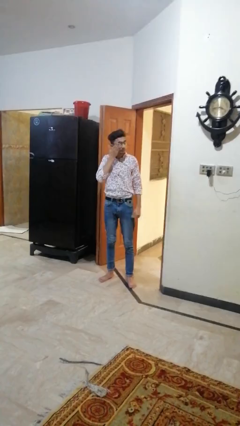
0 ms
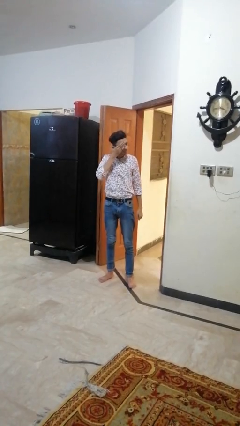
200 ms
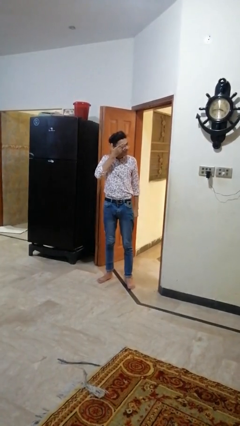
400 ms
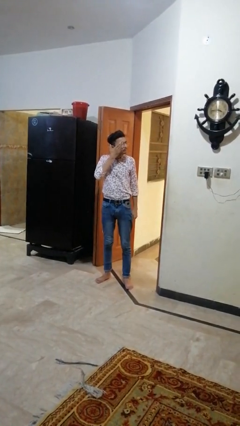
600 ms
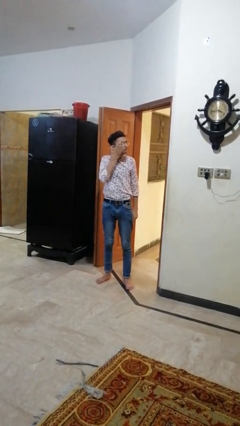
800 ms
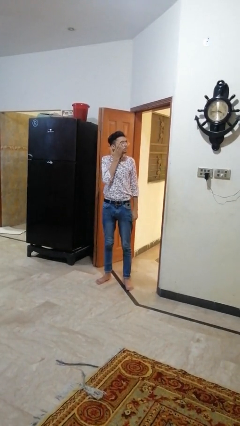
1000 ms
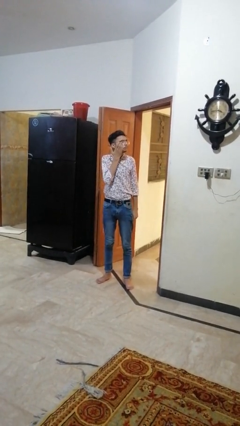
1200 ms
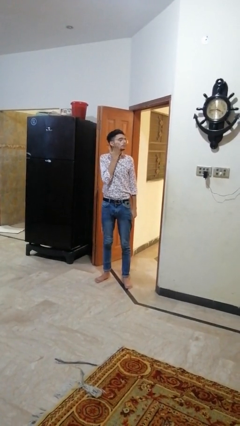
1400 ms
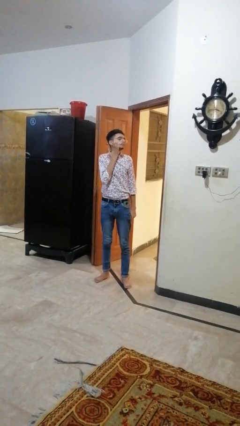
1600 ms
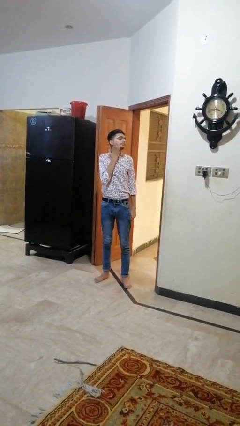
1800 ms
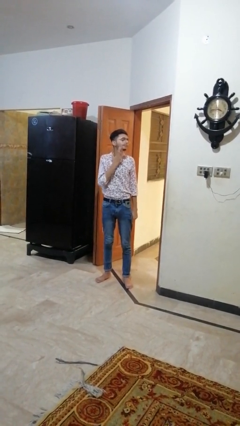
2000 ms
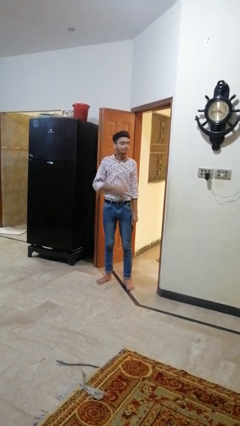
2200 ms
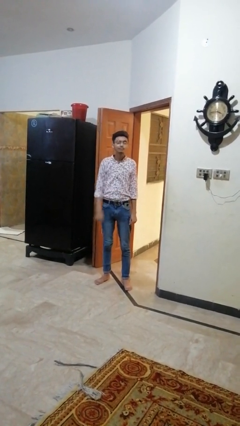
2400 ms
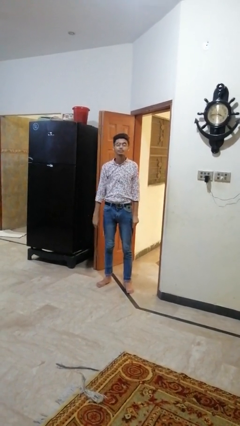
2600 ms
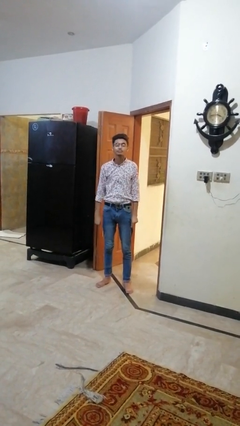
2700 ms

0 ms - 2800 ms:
person rubs eyes

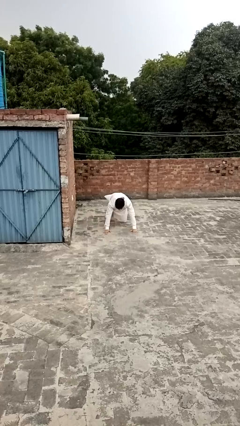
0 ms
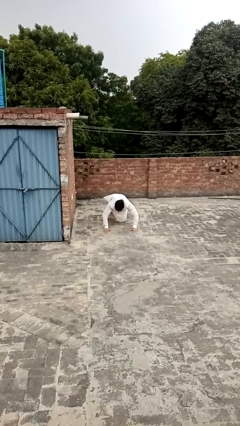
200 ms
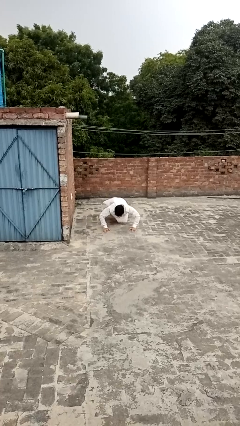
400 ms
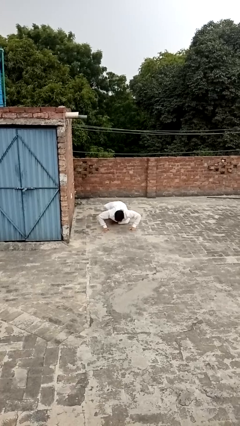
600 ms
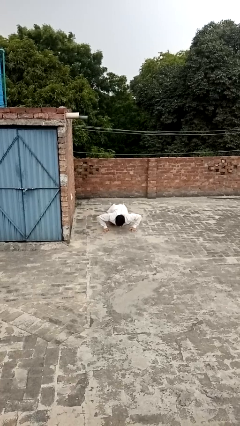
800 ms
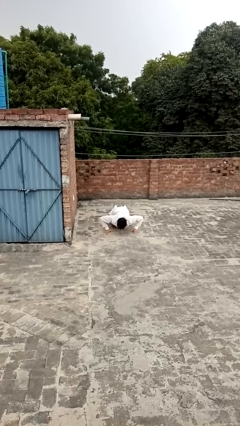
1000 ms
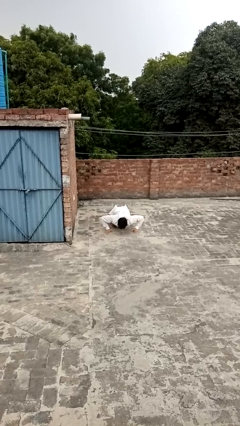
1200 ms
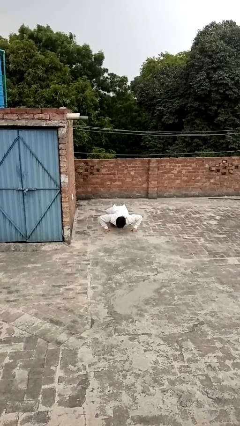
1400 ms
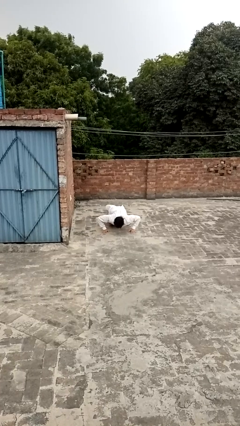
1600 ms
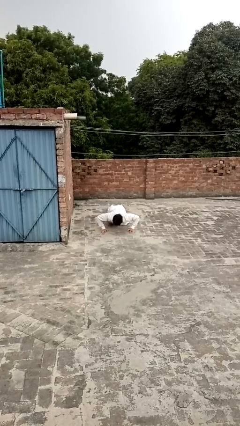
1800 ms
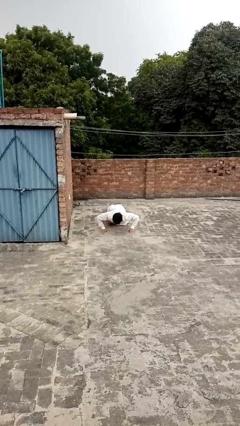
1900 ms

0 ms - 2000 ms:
person exercises with pushup

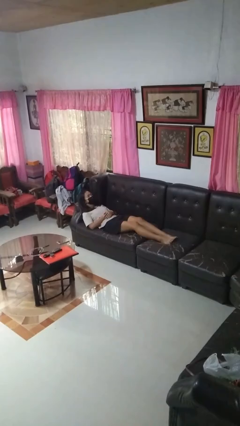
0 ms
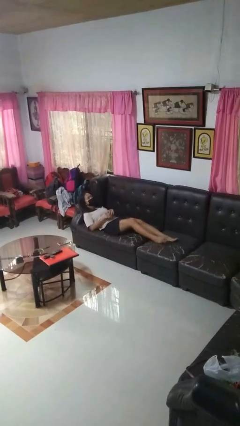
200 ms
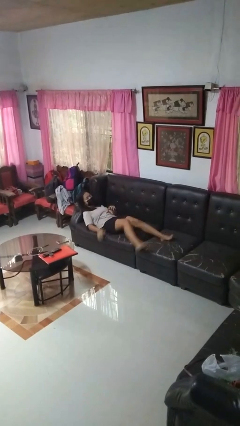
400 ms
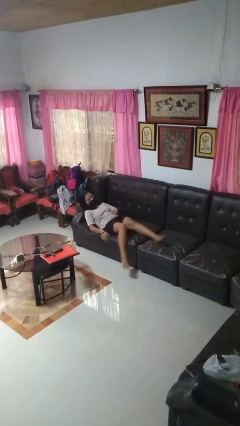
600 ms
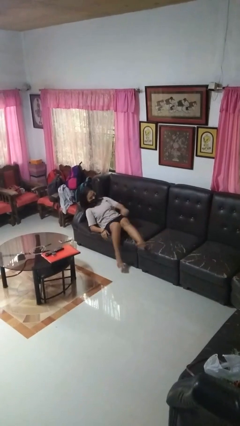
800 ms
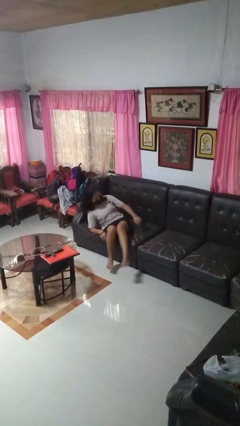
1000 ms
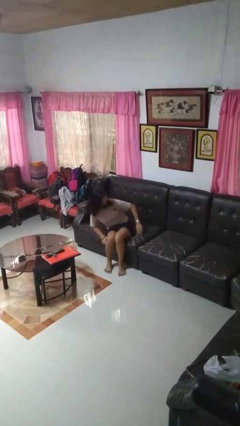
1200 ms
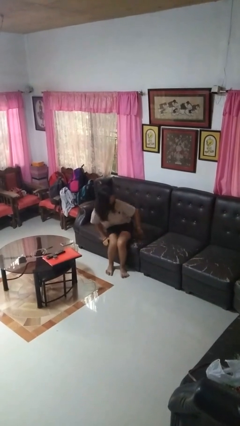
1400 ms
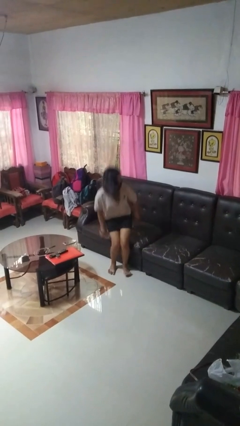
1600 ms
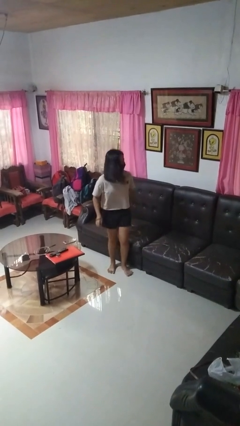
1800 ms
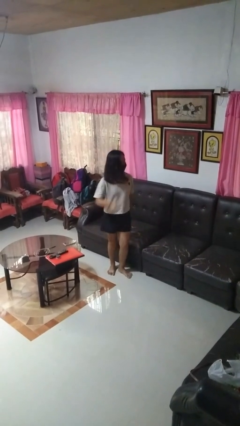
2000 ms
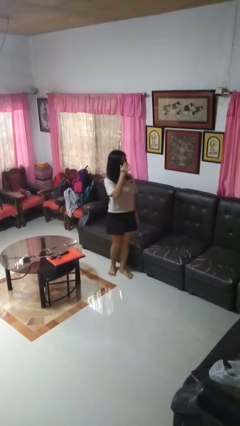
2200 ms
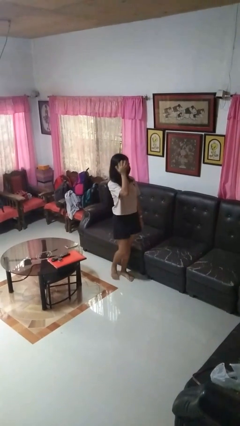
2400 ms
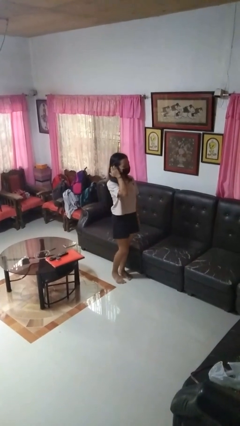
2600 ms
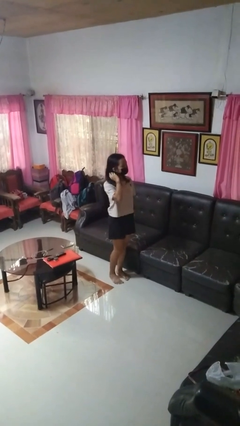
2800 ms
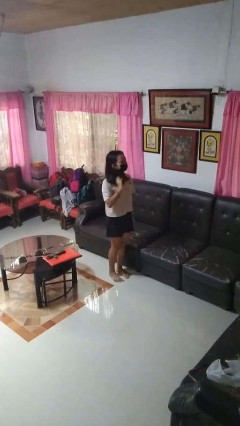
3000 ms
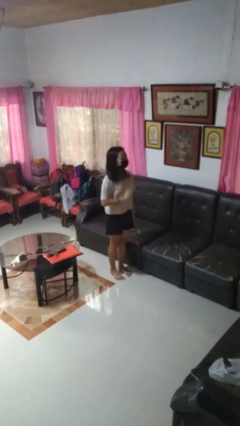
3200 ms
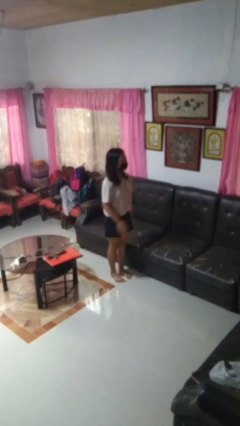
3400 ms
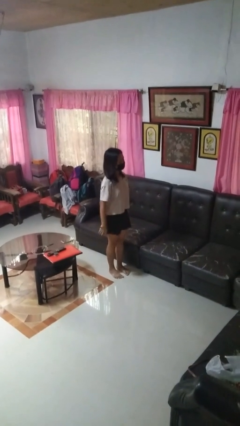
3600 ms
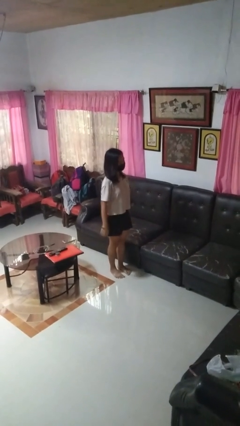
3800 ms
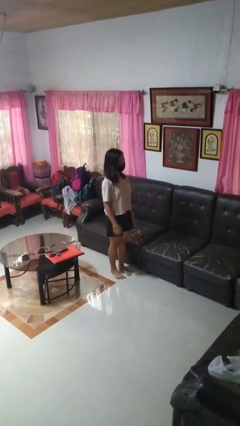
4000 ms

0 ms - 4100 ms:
person stands up

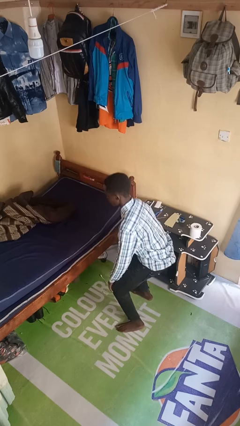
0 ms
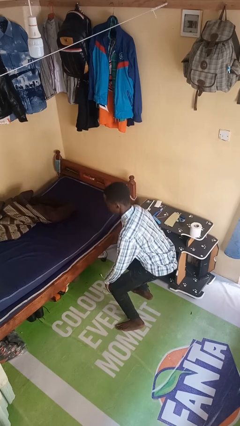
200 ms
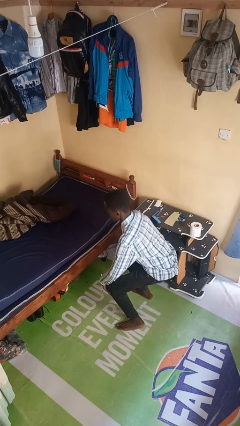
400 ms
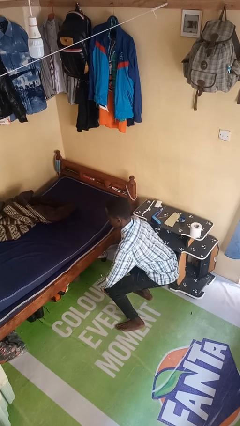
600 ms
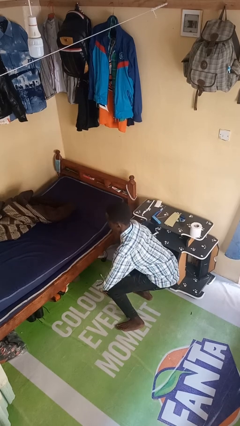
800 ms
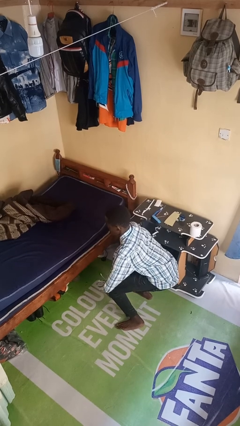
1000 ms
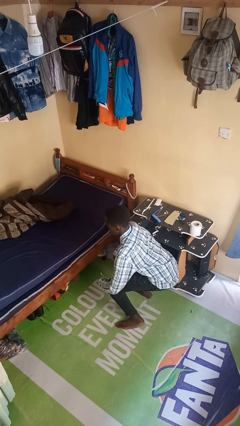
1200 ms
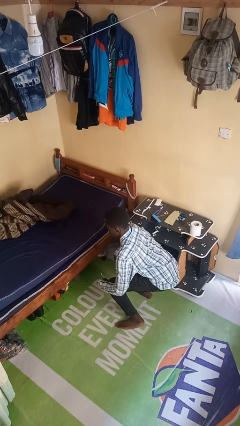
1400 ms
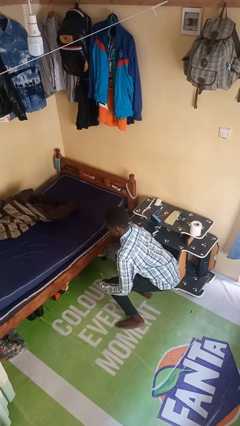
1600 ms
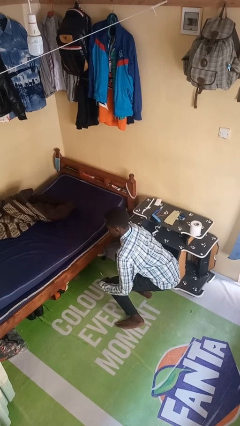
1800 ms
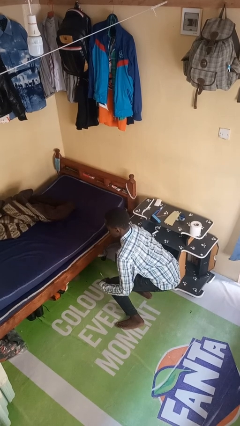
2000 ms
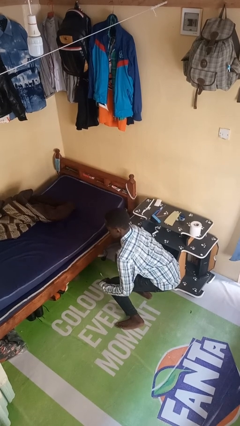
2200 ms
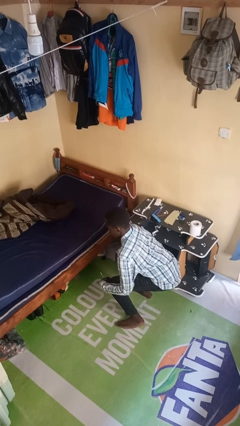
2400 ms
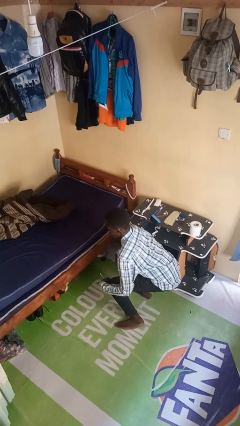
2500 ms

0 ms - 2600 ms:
person squats

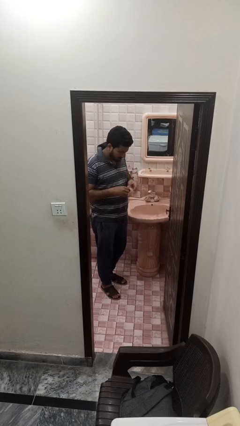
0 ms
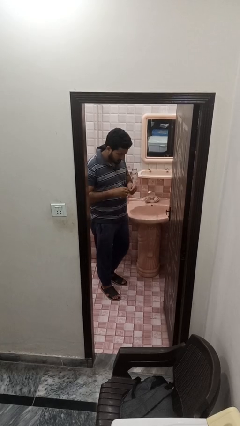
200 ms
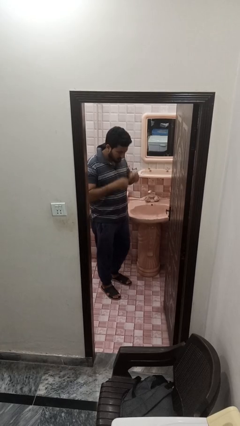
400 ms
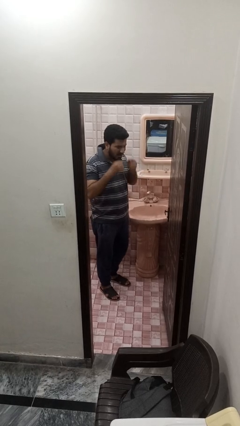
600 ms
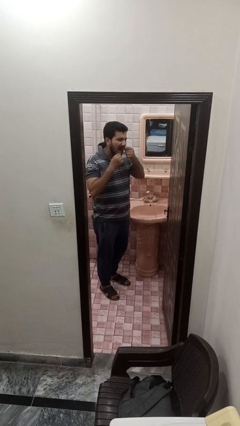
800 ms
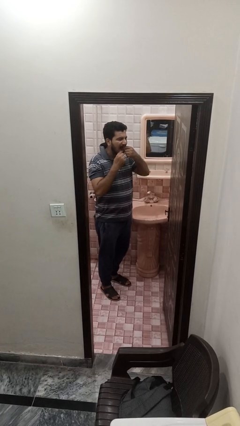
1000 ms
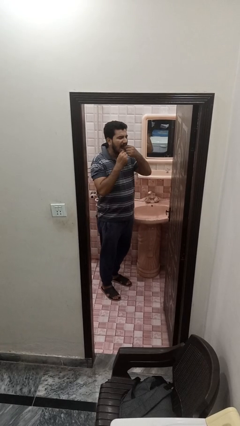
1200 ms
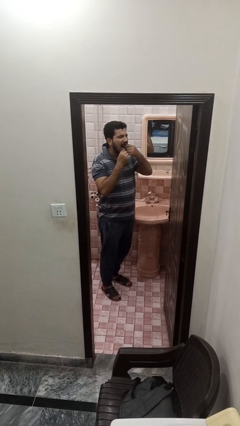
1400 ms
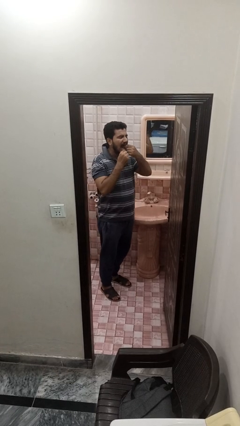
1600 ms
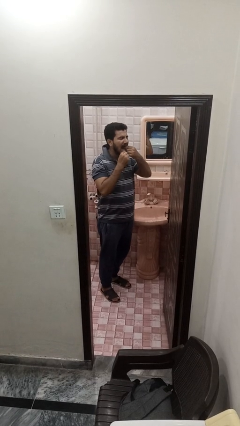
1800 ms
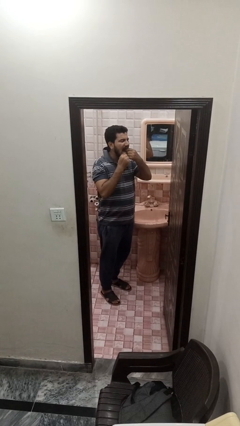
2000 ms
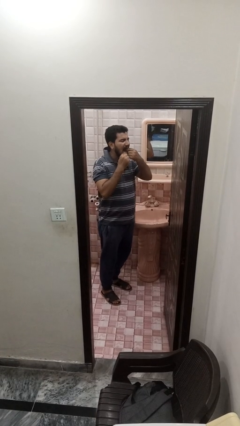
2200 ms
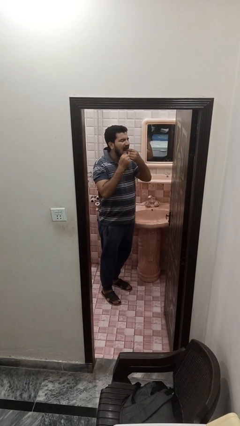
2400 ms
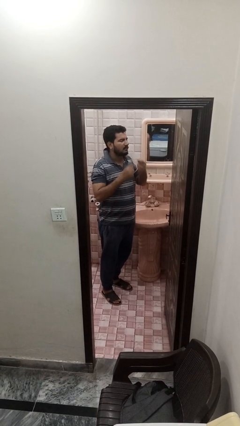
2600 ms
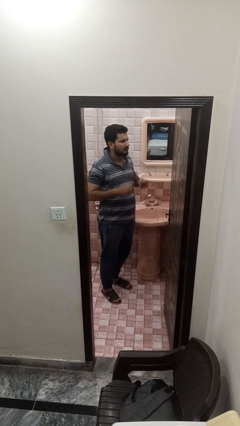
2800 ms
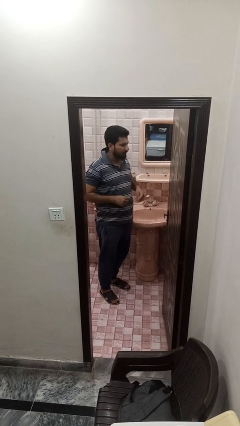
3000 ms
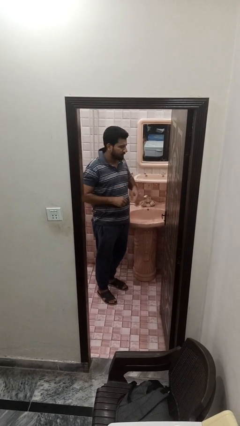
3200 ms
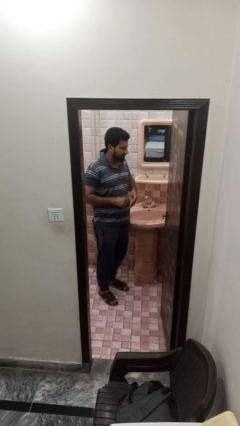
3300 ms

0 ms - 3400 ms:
person flosses

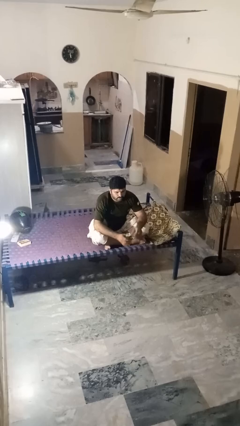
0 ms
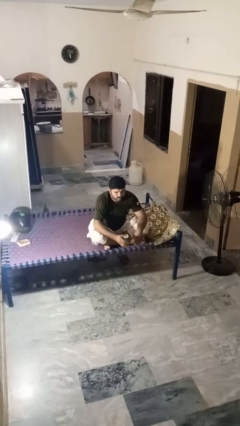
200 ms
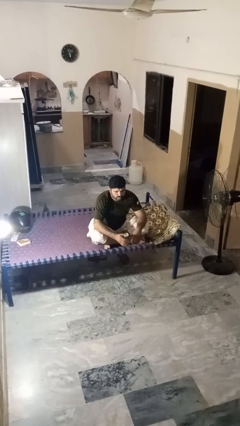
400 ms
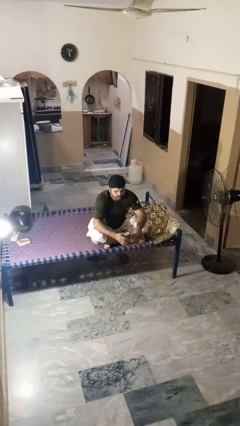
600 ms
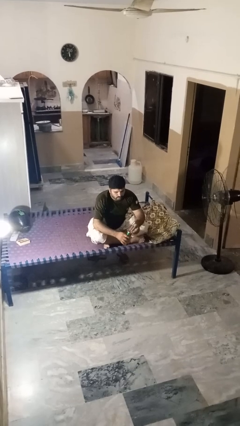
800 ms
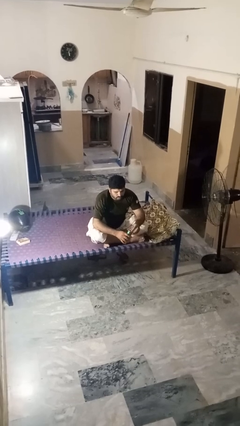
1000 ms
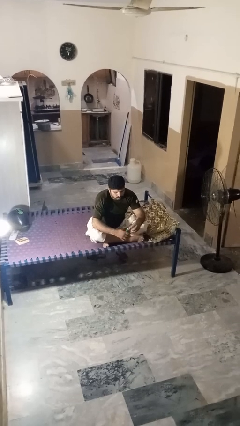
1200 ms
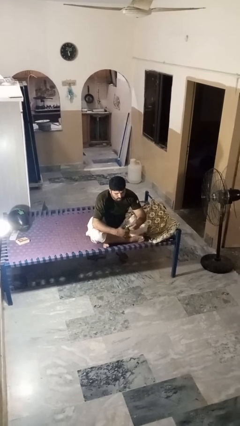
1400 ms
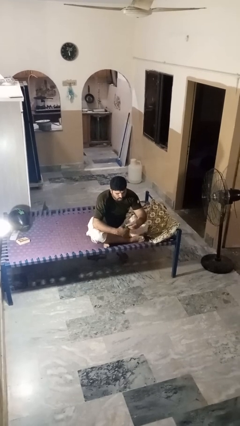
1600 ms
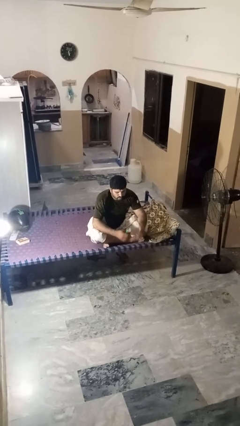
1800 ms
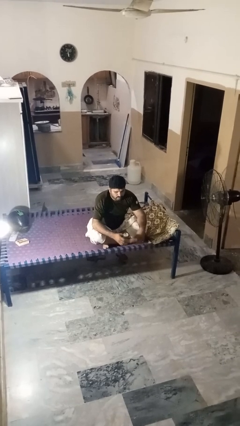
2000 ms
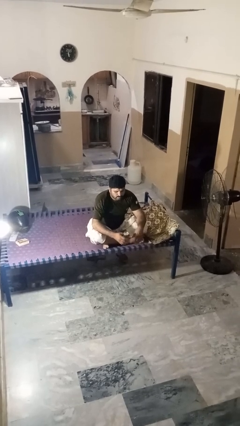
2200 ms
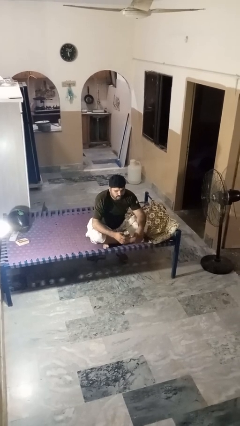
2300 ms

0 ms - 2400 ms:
person opens beverage can

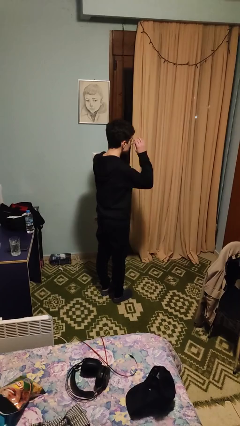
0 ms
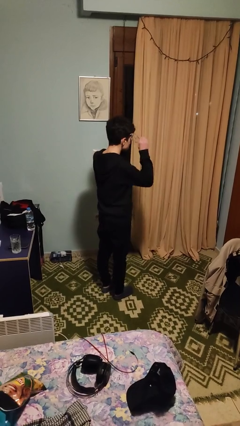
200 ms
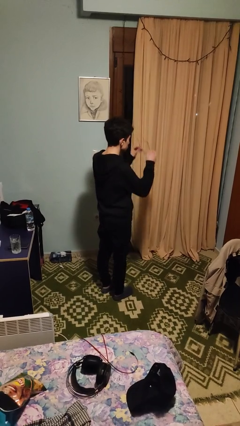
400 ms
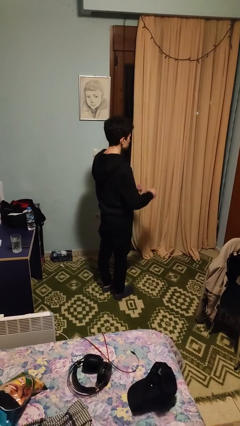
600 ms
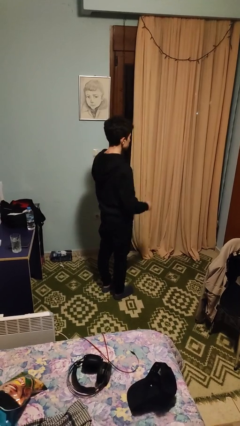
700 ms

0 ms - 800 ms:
person takes off glasses
